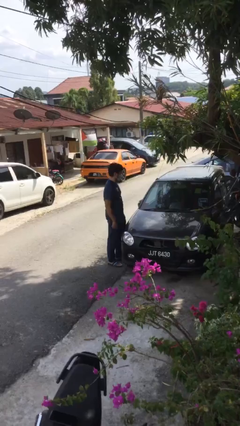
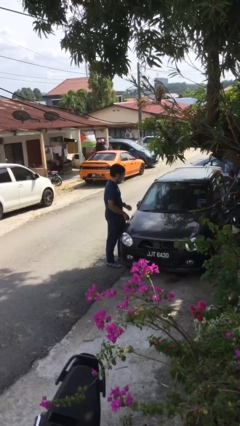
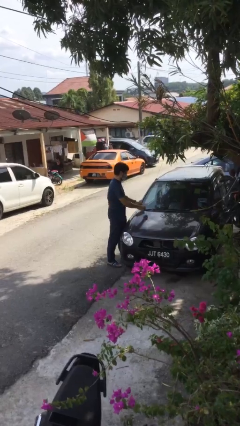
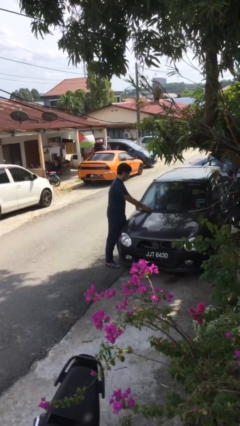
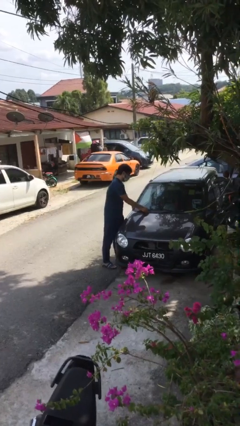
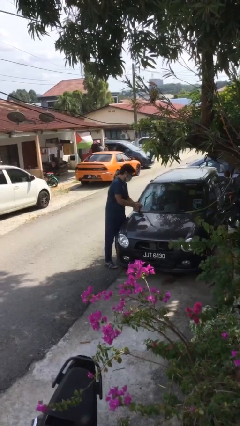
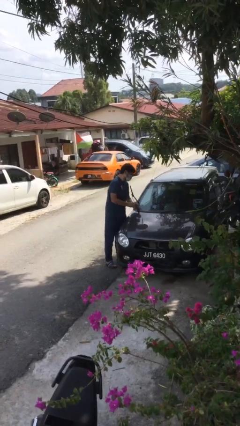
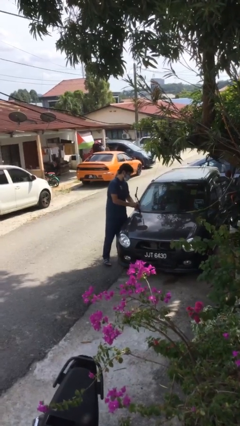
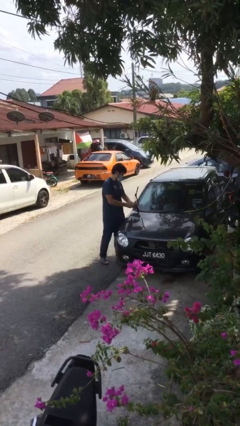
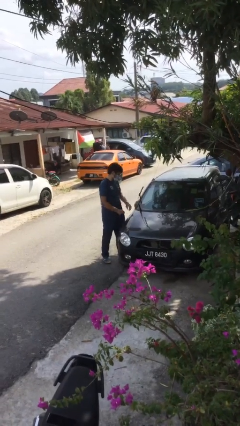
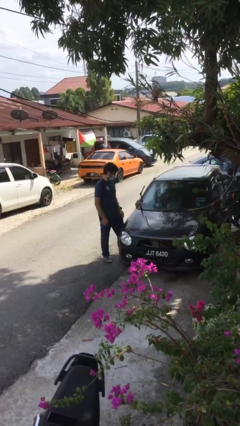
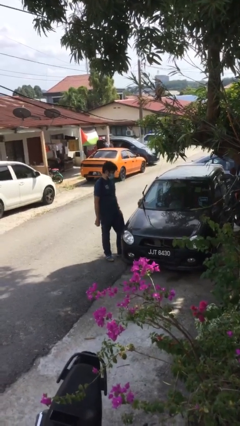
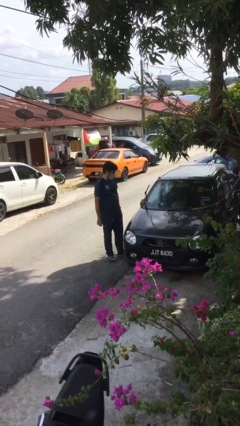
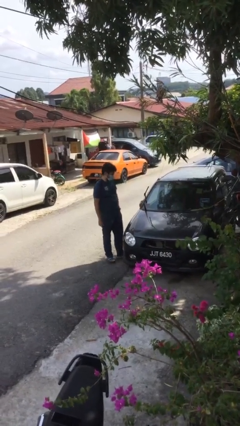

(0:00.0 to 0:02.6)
person flips up car wipers

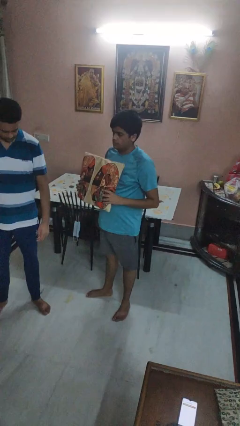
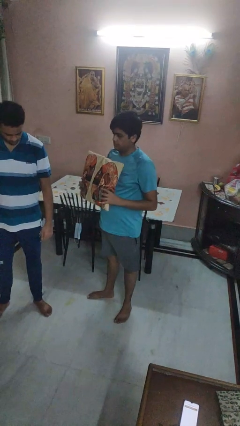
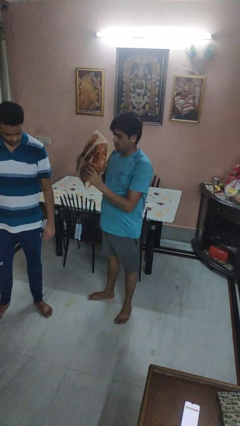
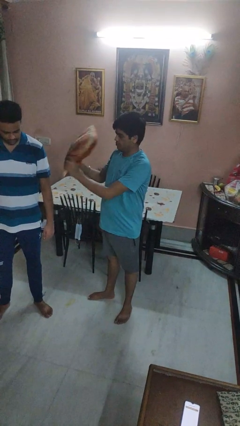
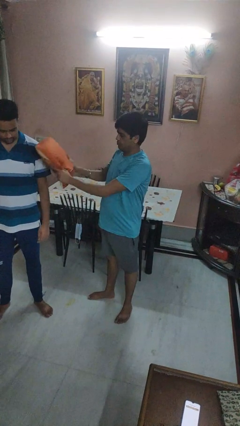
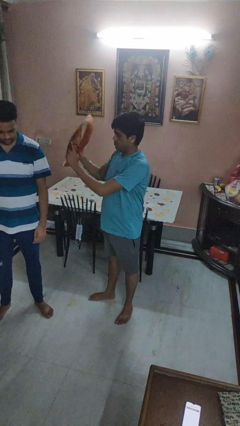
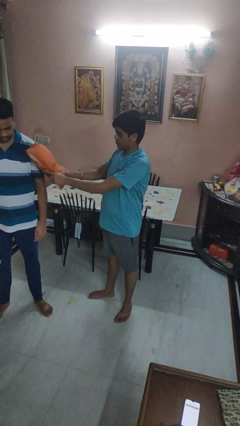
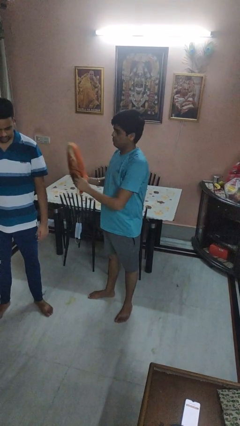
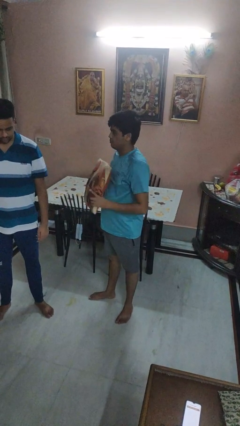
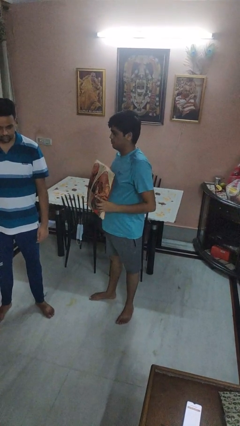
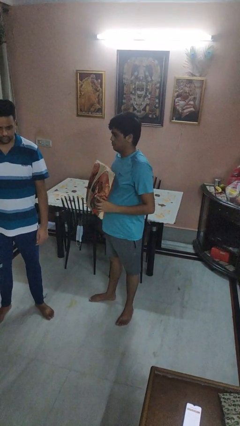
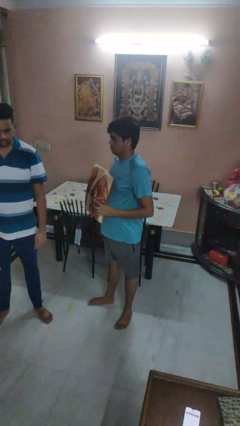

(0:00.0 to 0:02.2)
person hits person with pillow

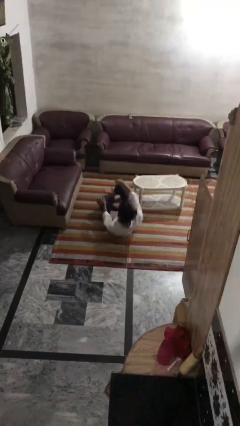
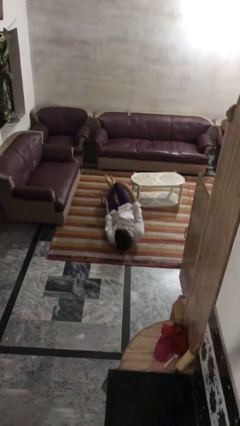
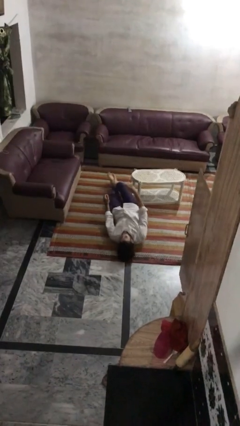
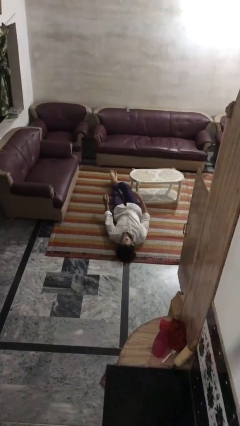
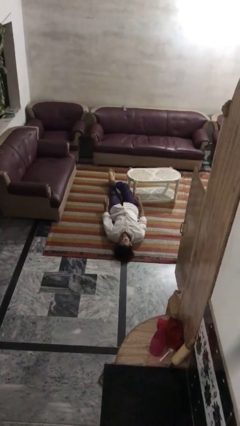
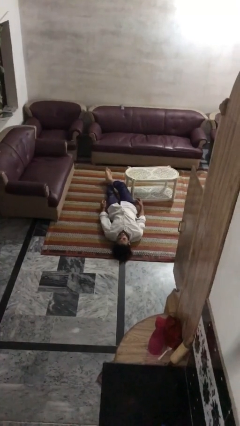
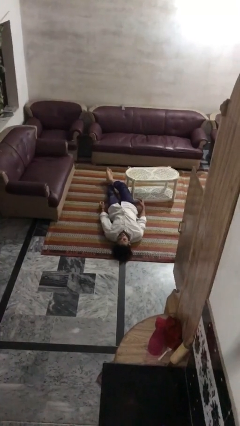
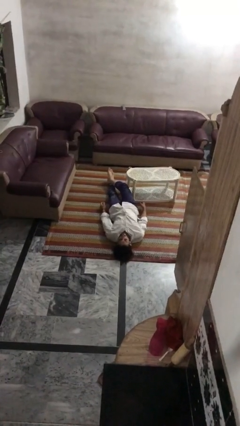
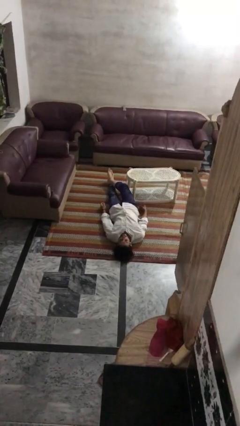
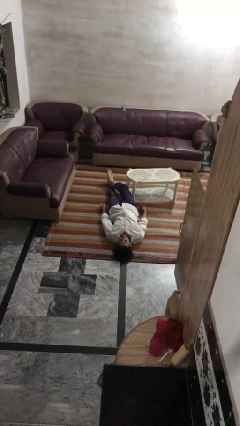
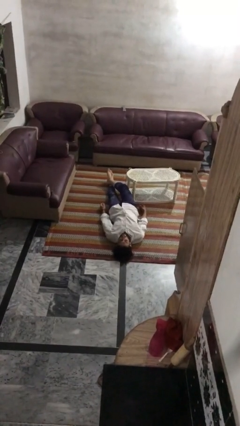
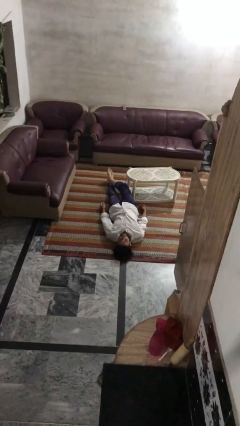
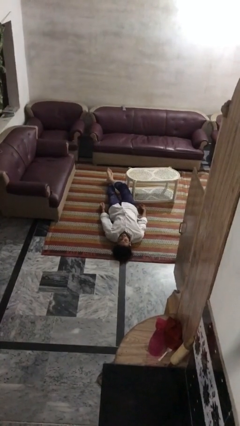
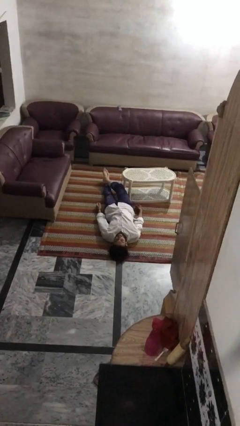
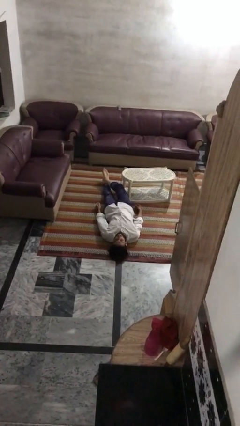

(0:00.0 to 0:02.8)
person lies down on floor

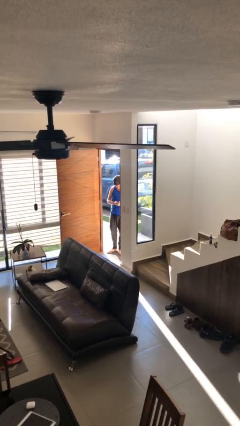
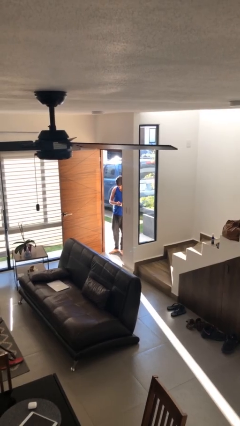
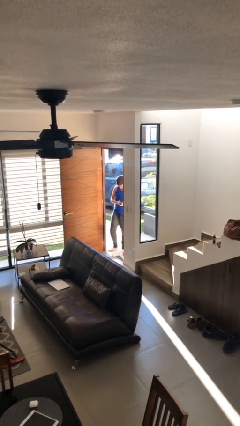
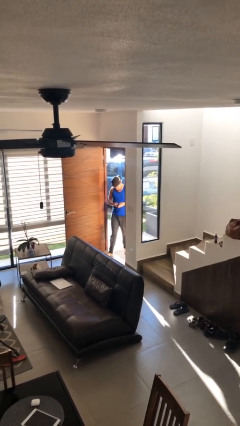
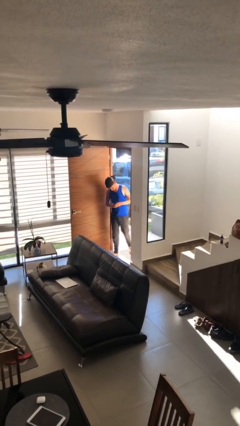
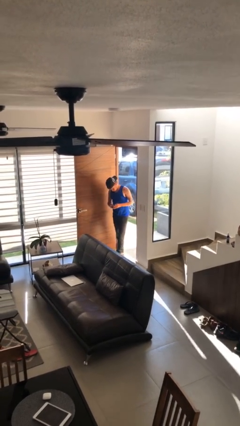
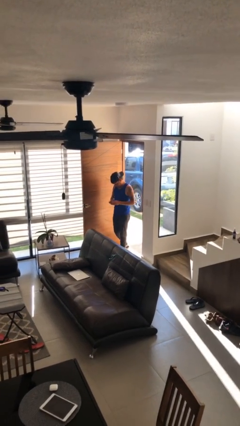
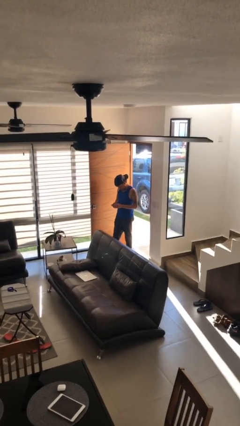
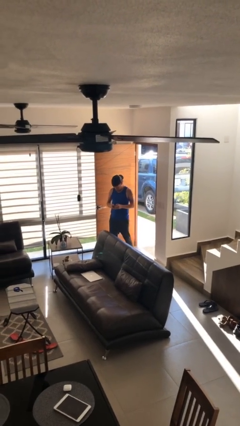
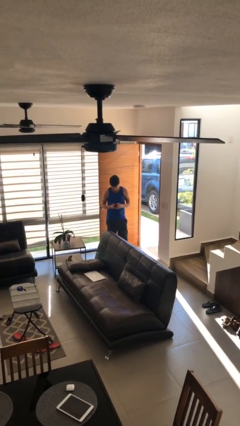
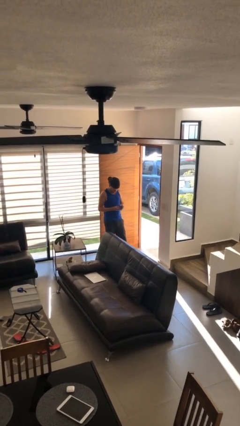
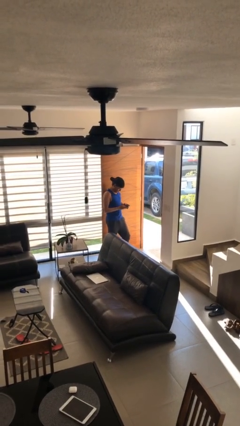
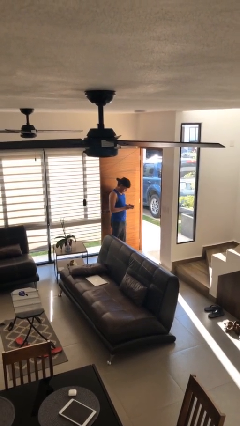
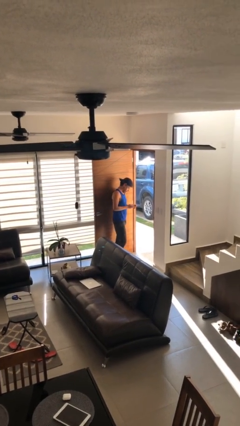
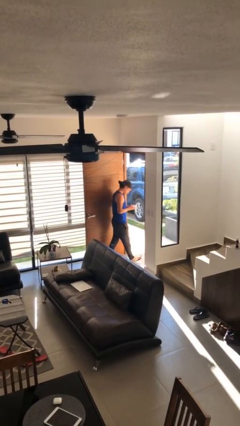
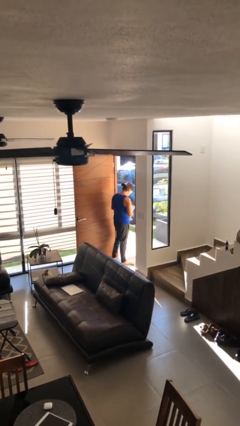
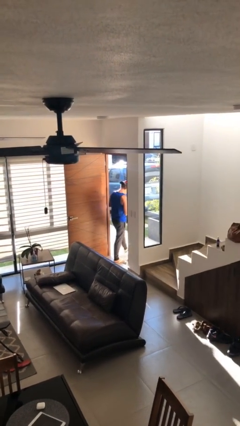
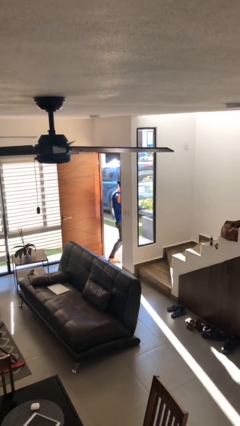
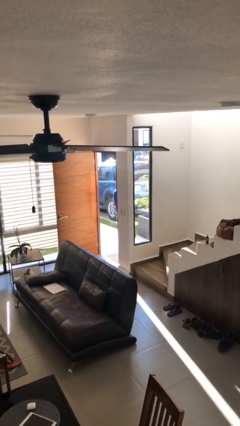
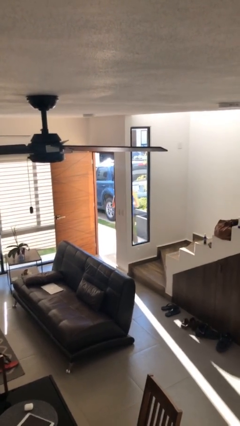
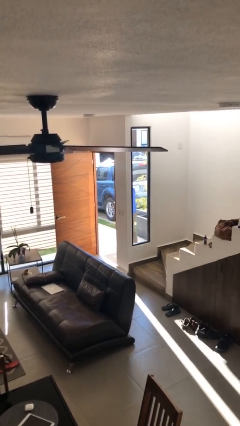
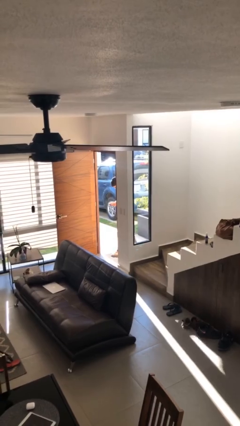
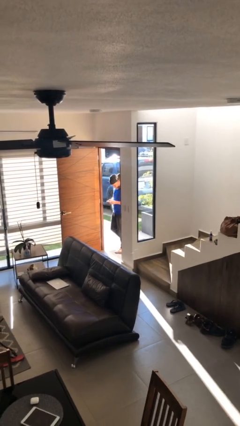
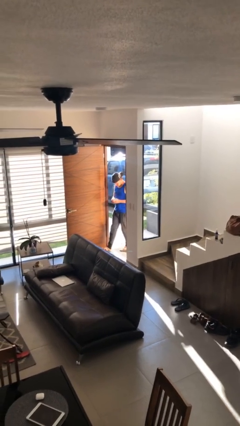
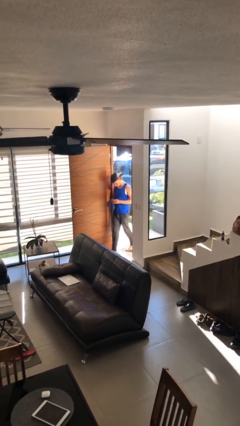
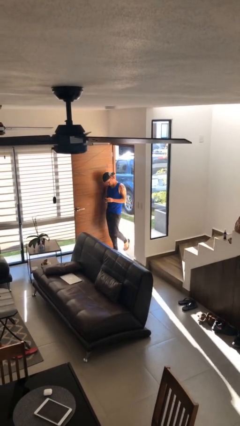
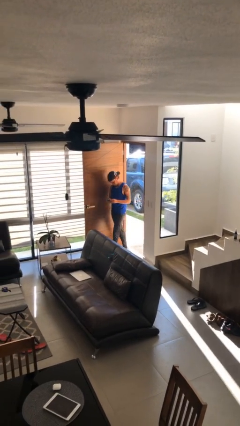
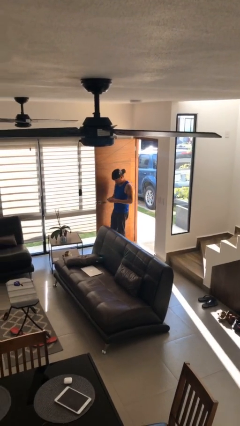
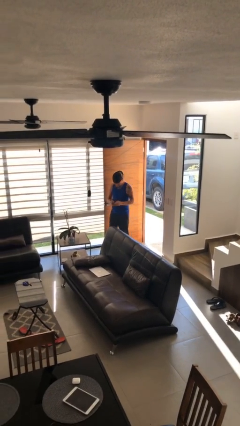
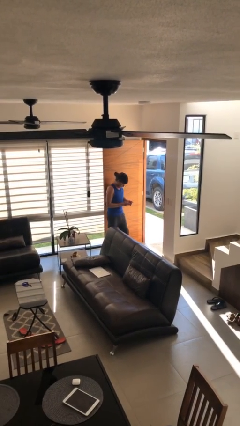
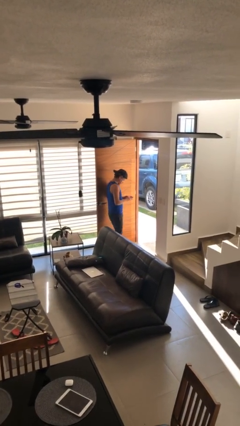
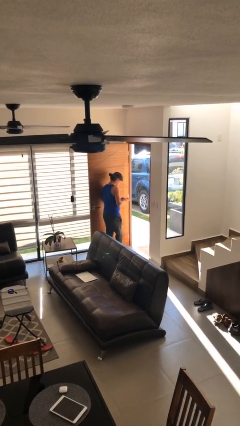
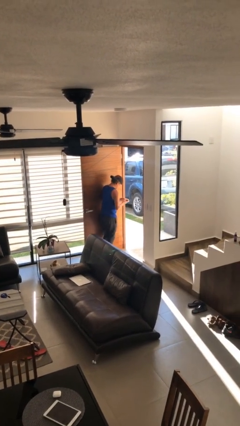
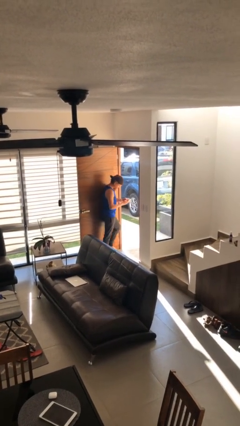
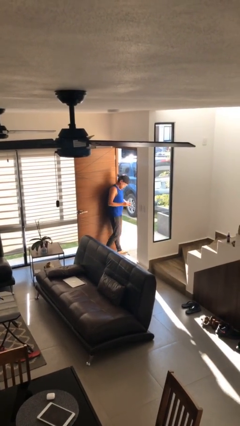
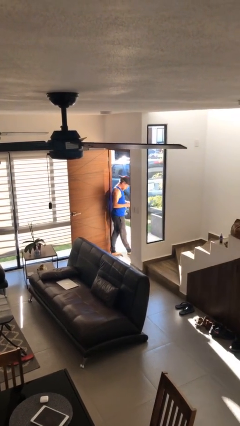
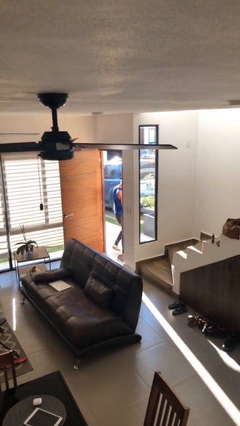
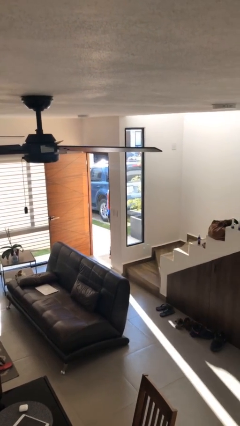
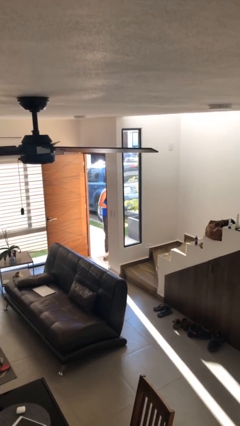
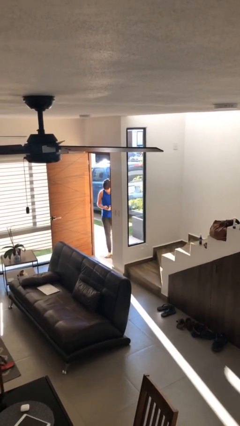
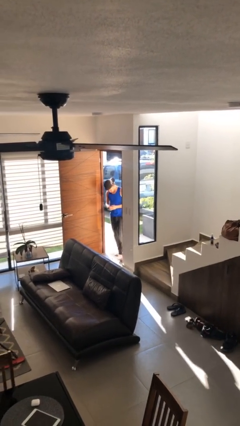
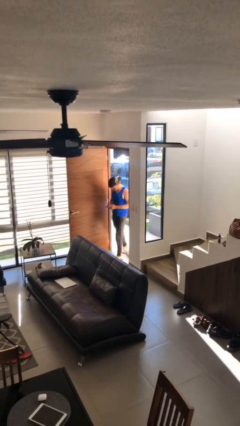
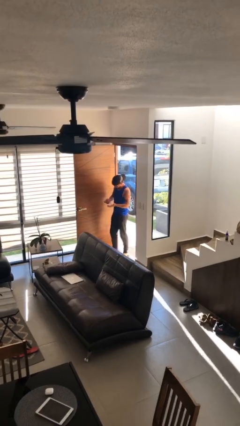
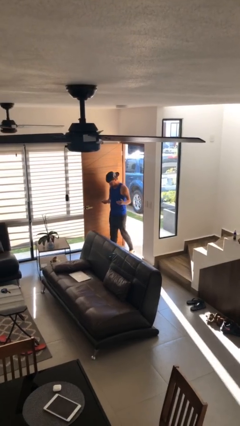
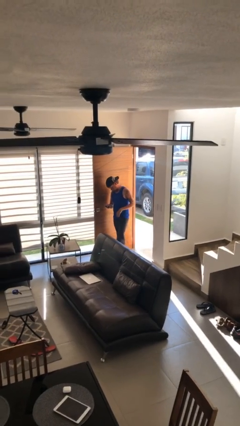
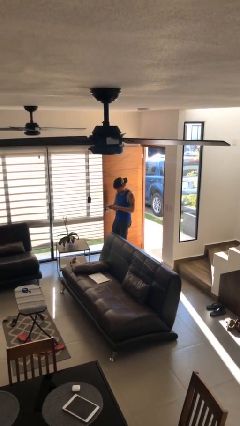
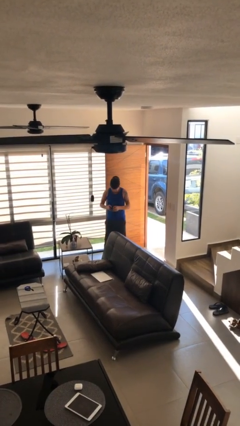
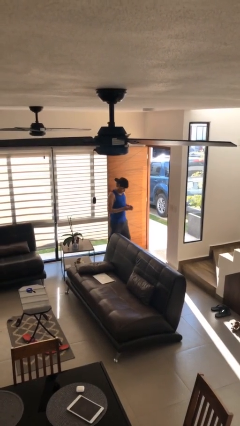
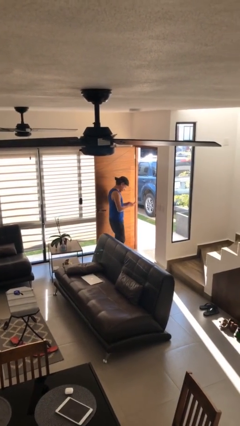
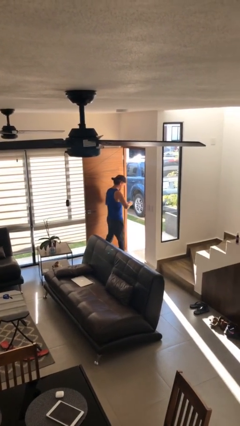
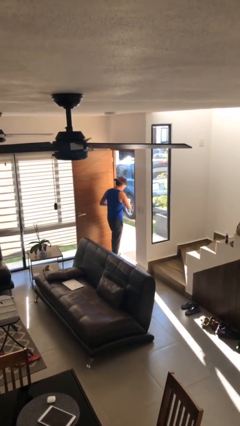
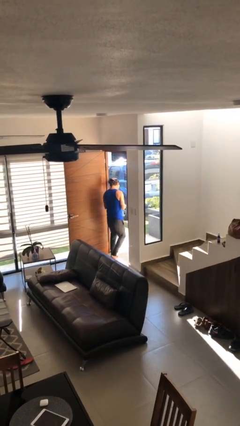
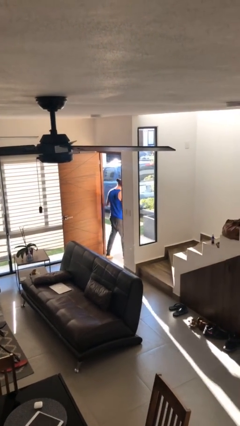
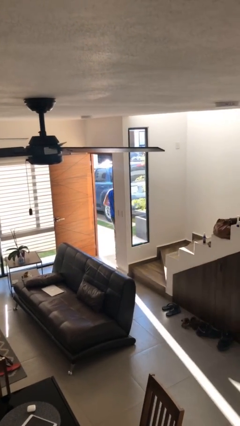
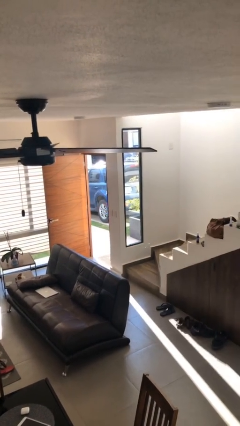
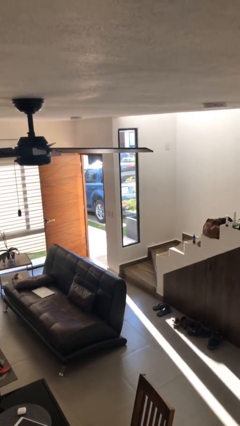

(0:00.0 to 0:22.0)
person texts on phone
